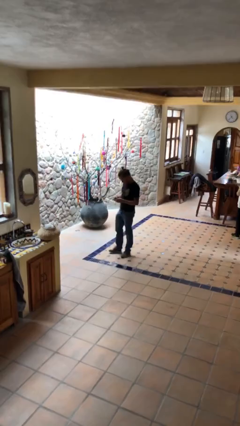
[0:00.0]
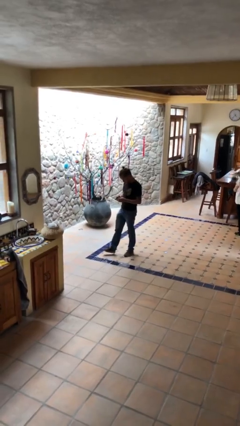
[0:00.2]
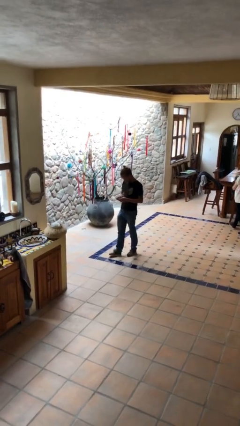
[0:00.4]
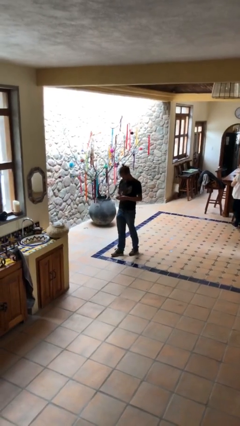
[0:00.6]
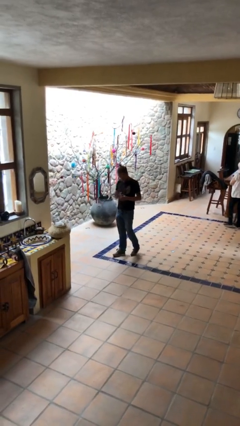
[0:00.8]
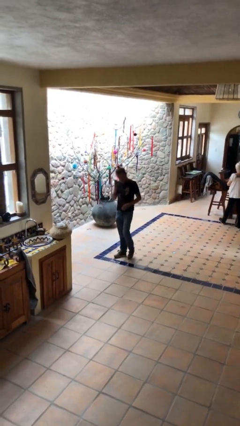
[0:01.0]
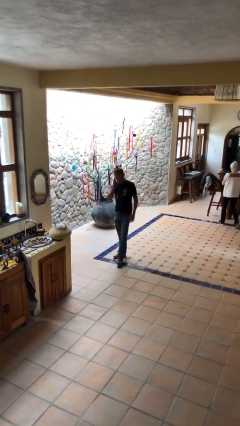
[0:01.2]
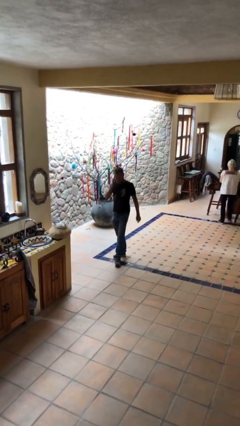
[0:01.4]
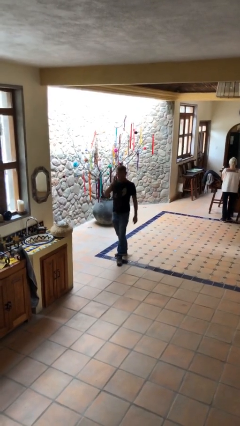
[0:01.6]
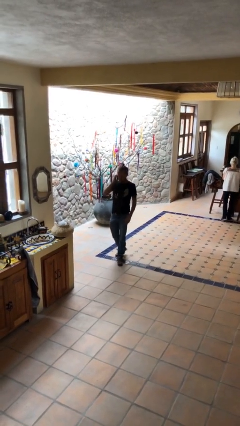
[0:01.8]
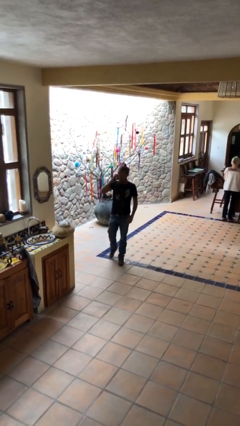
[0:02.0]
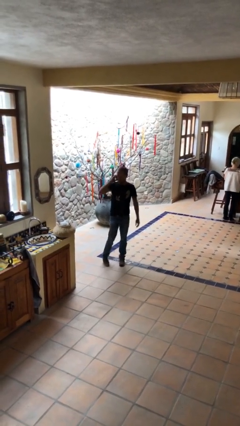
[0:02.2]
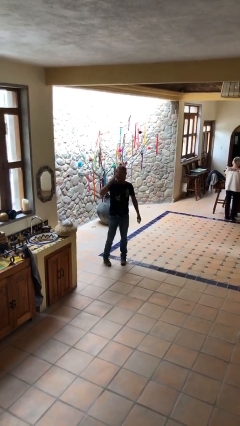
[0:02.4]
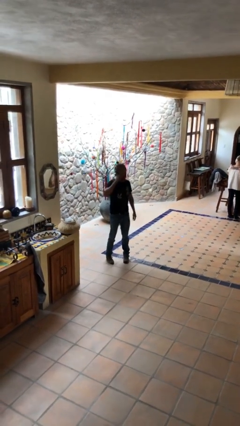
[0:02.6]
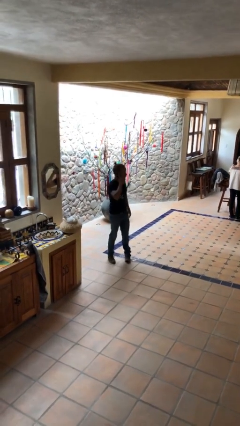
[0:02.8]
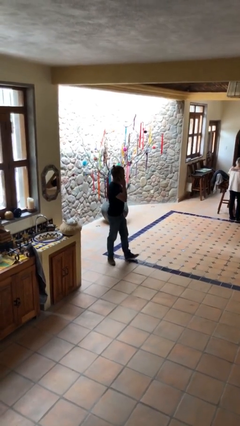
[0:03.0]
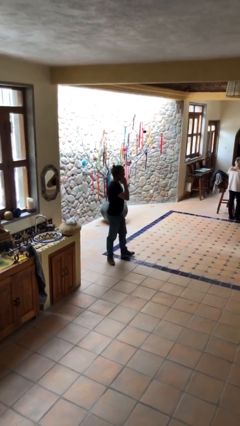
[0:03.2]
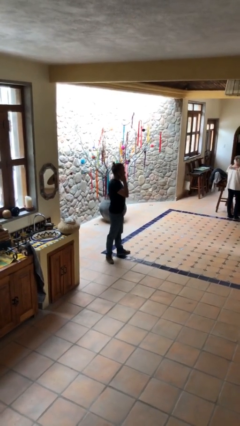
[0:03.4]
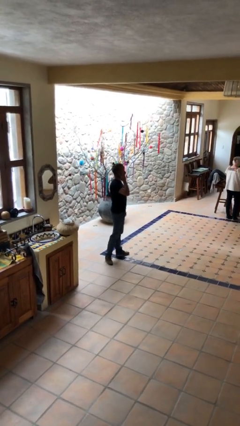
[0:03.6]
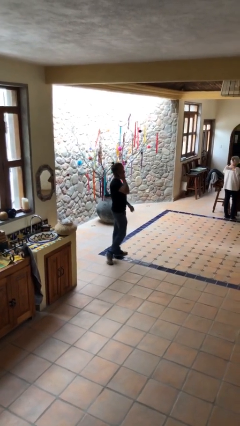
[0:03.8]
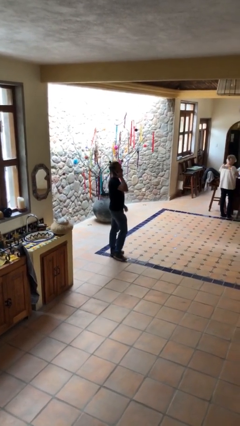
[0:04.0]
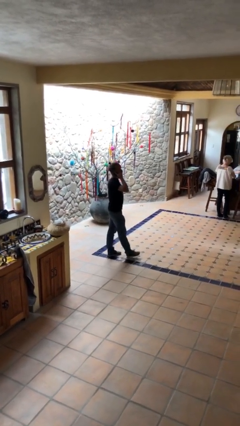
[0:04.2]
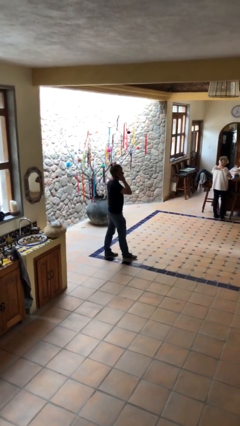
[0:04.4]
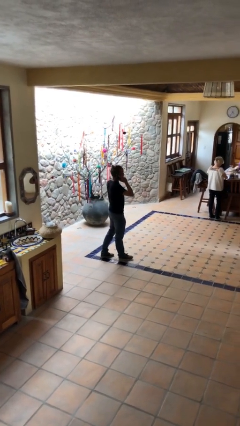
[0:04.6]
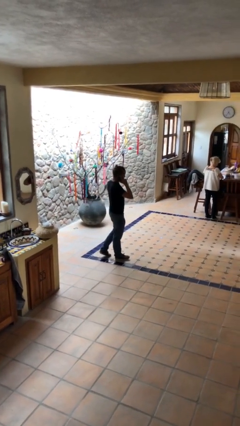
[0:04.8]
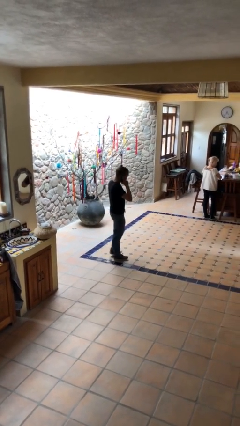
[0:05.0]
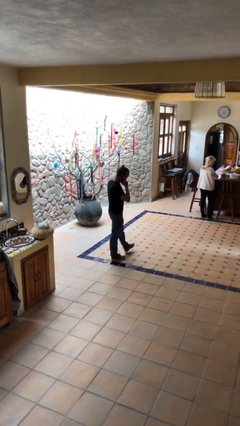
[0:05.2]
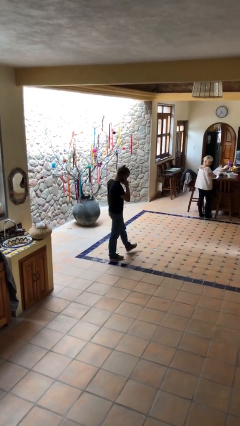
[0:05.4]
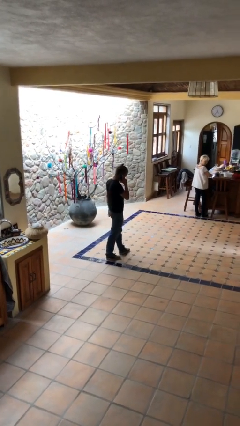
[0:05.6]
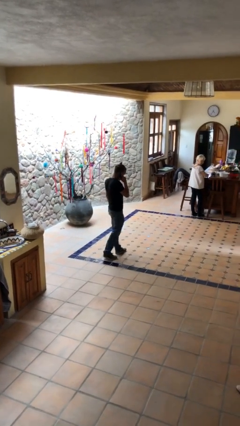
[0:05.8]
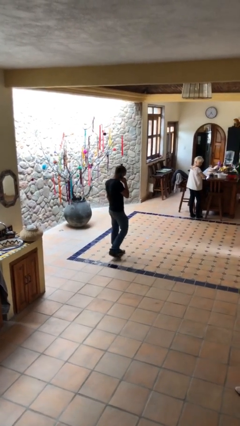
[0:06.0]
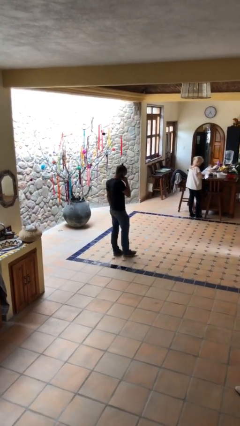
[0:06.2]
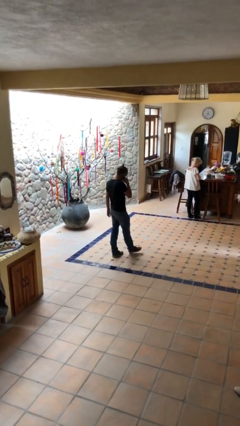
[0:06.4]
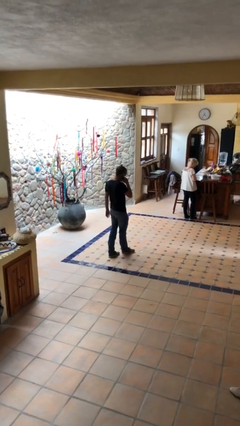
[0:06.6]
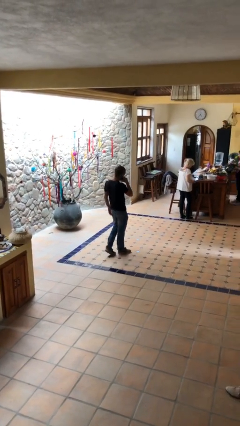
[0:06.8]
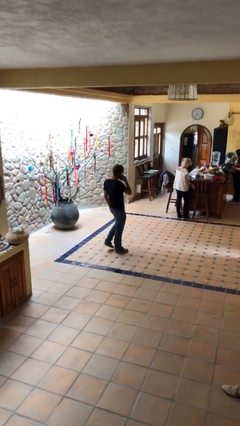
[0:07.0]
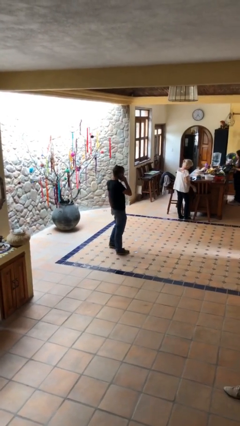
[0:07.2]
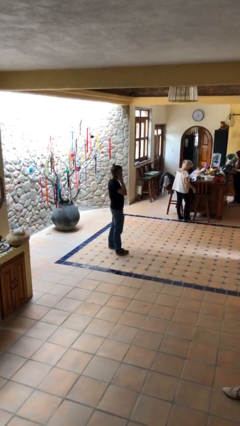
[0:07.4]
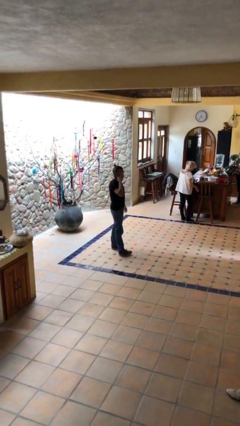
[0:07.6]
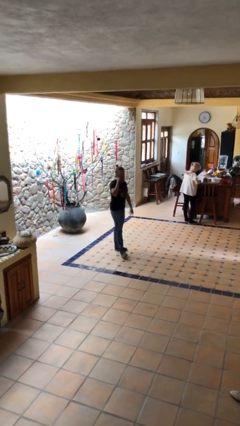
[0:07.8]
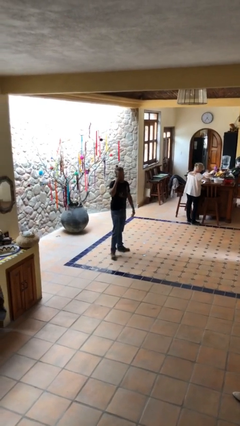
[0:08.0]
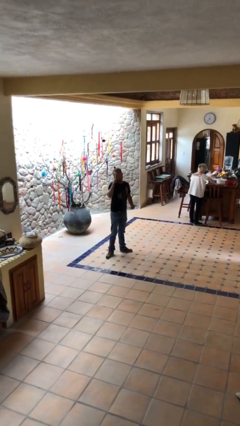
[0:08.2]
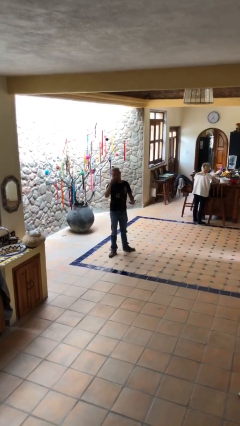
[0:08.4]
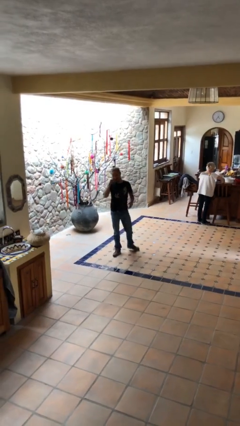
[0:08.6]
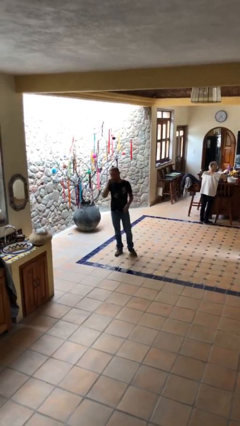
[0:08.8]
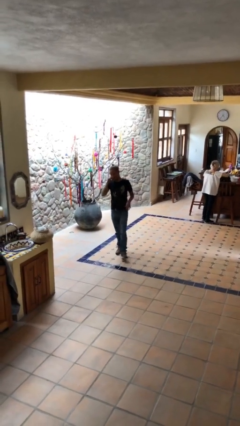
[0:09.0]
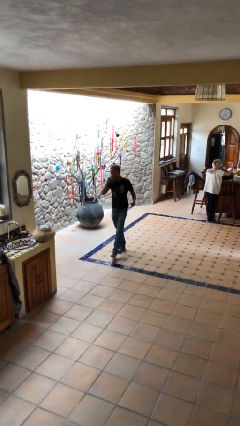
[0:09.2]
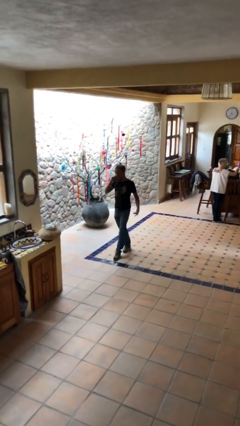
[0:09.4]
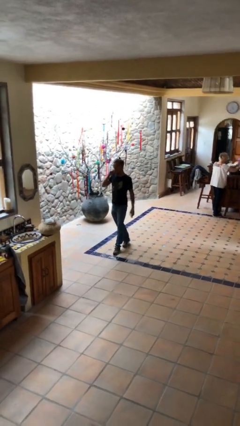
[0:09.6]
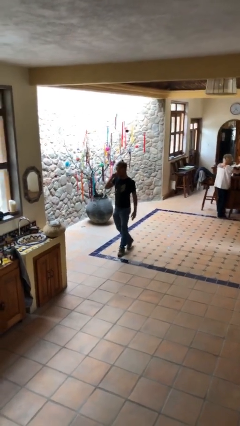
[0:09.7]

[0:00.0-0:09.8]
person talks on phone

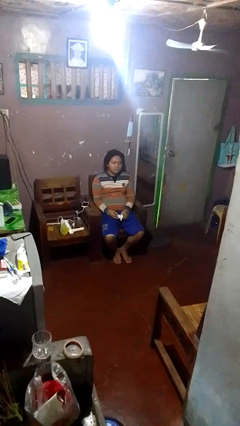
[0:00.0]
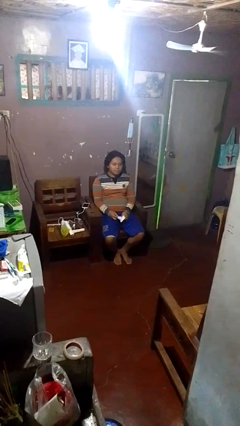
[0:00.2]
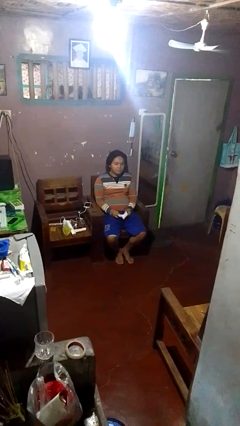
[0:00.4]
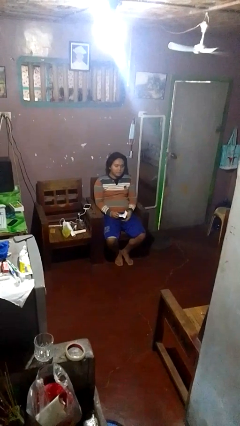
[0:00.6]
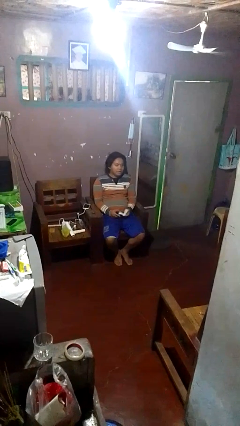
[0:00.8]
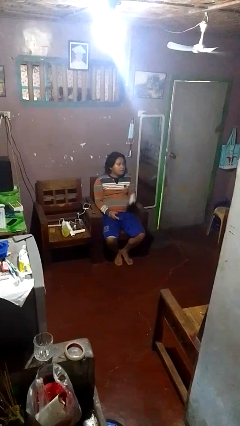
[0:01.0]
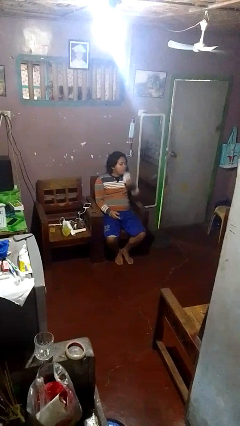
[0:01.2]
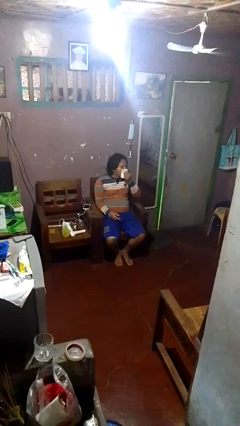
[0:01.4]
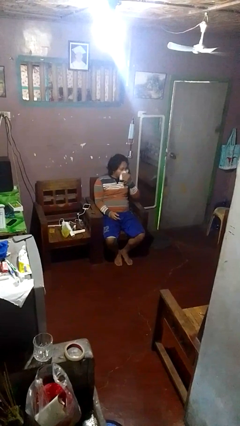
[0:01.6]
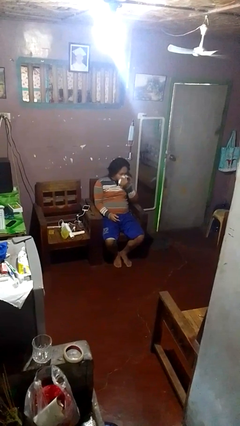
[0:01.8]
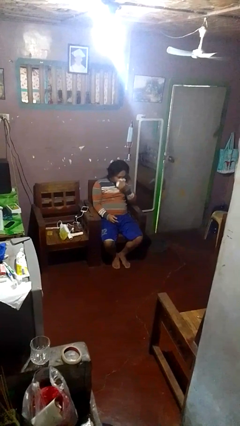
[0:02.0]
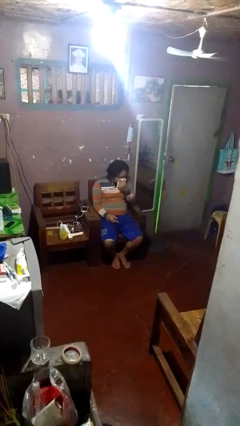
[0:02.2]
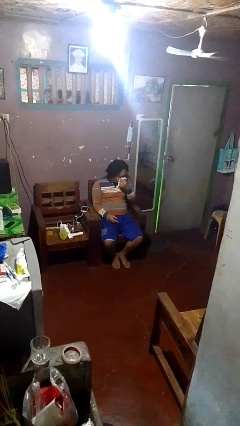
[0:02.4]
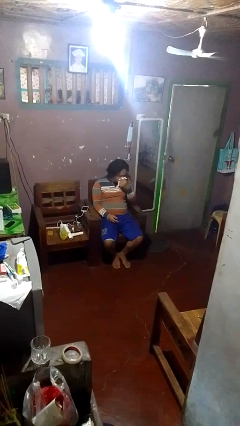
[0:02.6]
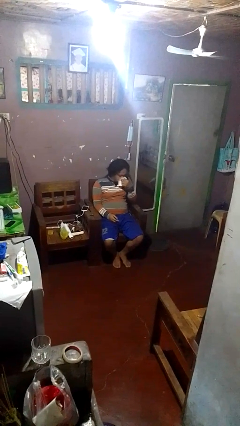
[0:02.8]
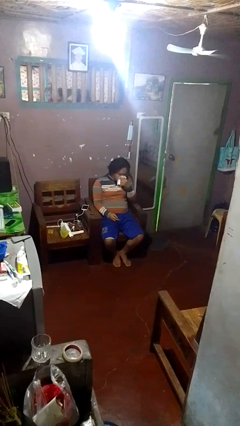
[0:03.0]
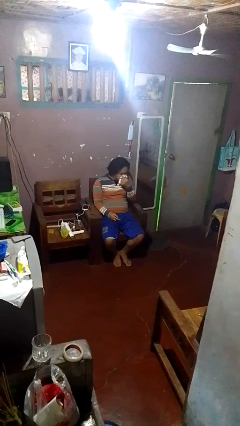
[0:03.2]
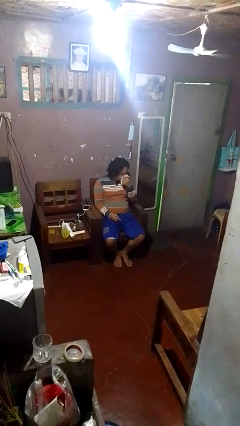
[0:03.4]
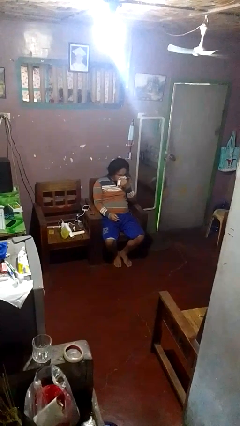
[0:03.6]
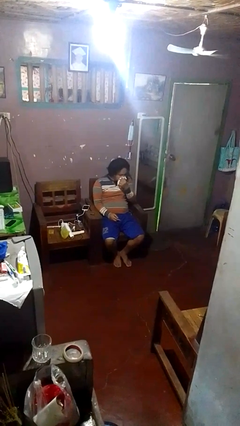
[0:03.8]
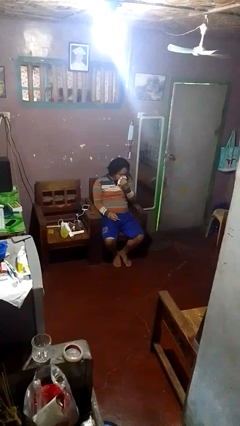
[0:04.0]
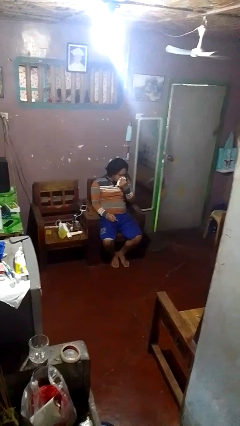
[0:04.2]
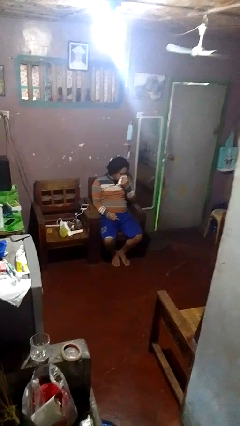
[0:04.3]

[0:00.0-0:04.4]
person blows nose

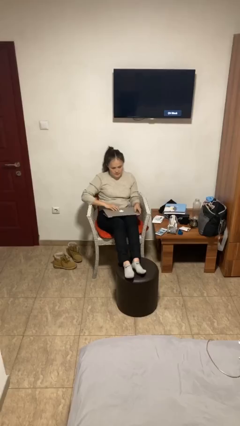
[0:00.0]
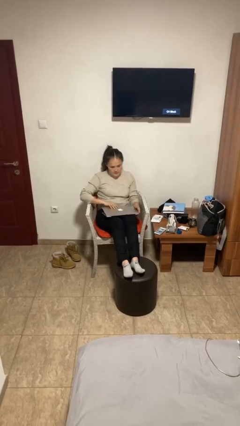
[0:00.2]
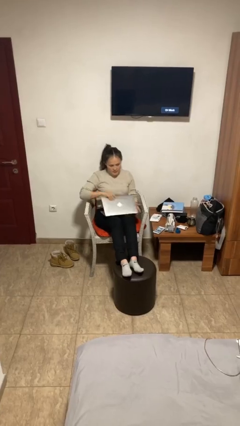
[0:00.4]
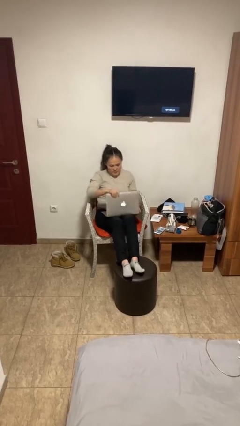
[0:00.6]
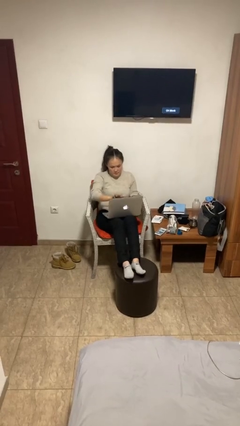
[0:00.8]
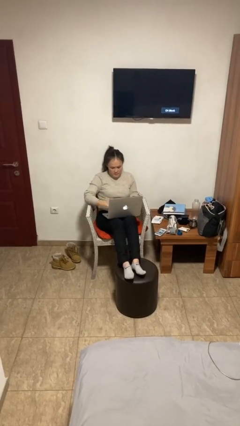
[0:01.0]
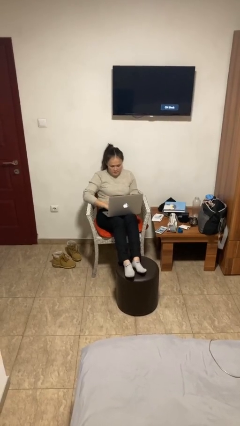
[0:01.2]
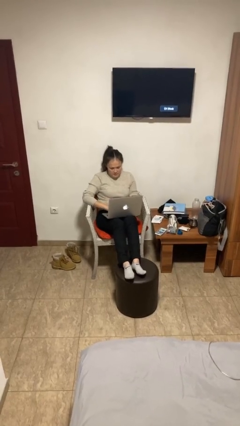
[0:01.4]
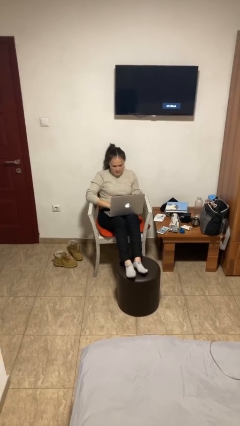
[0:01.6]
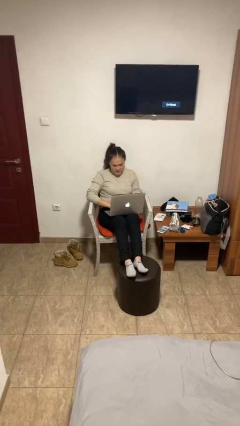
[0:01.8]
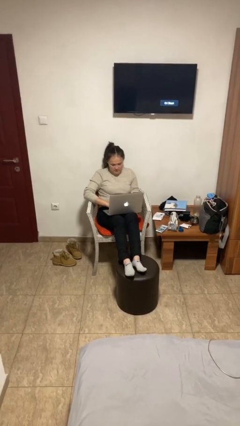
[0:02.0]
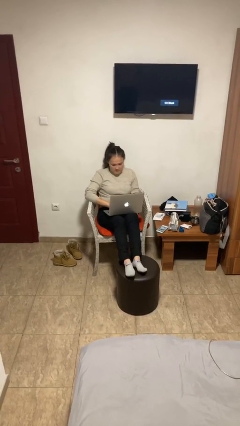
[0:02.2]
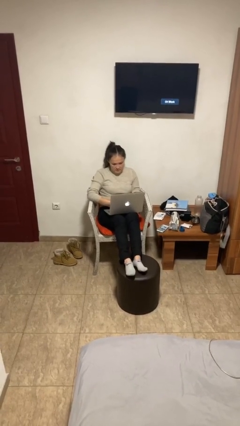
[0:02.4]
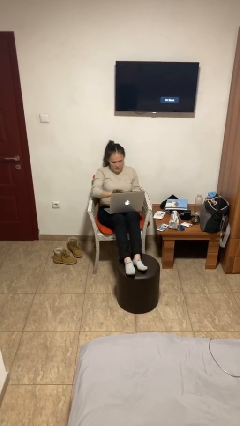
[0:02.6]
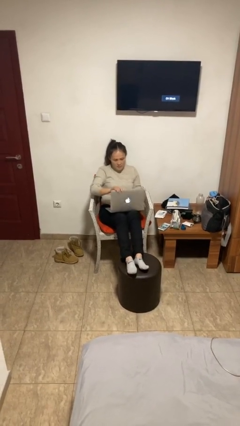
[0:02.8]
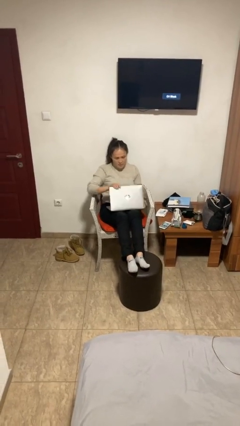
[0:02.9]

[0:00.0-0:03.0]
person interacts with laptop

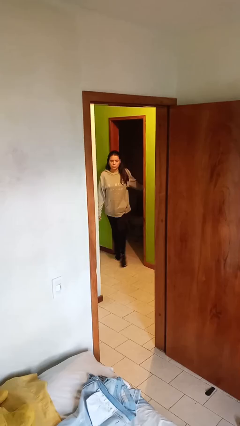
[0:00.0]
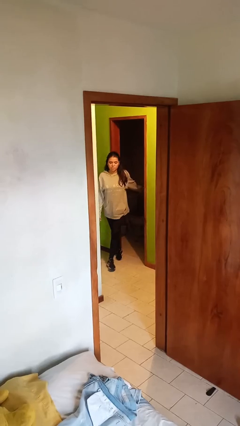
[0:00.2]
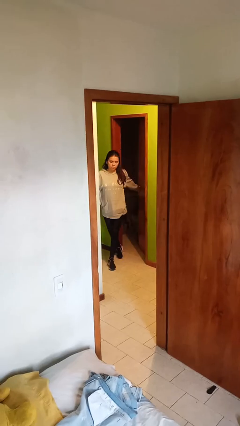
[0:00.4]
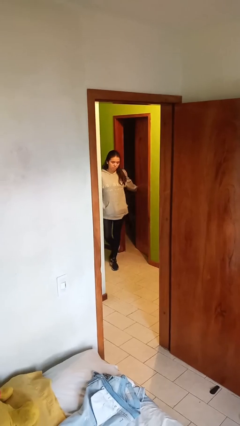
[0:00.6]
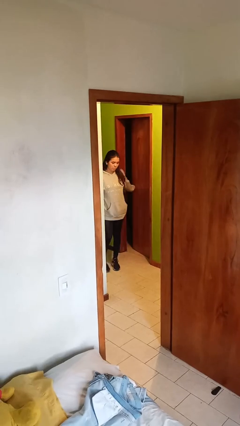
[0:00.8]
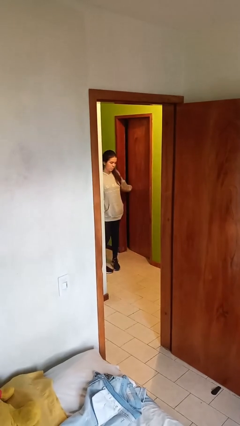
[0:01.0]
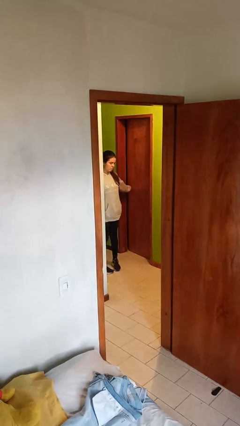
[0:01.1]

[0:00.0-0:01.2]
person closes facility door
